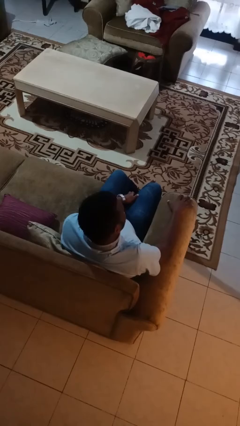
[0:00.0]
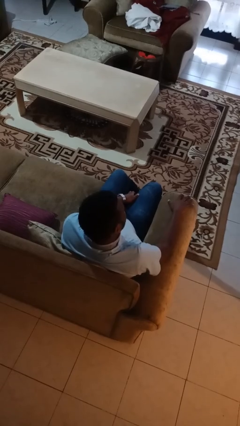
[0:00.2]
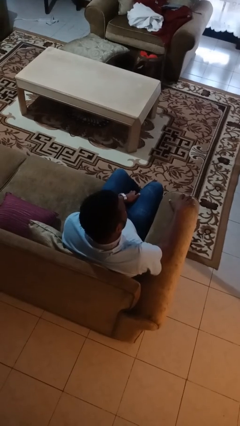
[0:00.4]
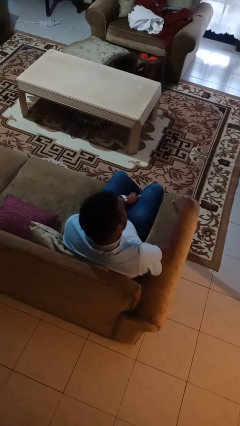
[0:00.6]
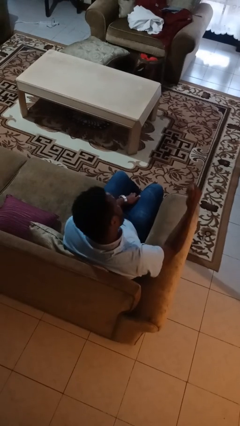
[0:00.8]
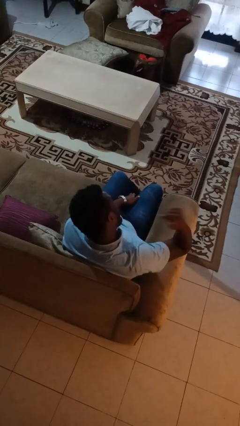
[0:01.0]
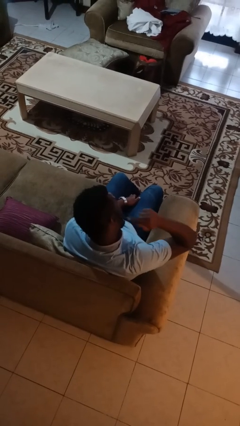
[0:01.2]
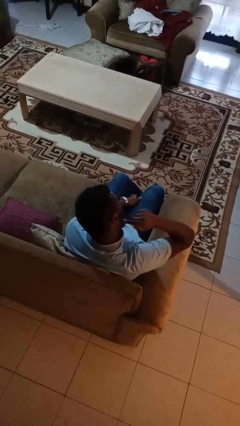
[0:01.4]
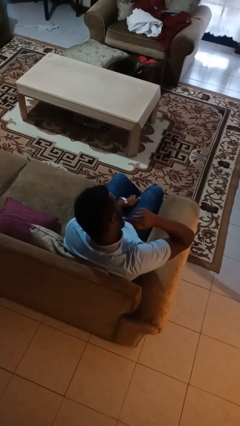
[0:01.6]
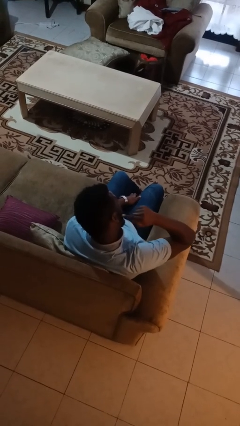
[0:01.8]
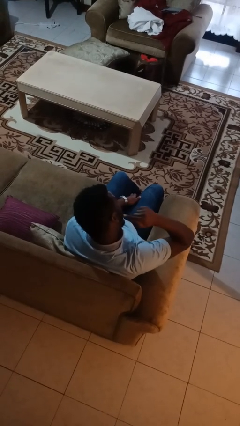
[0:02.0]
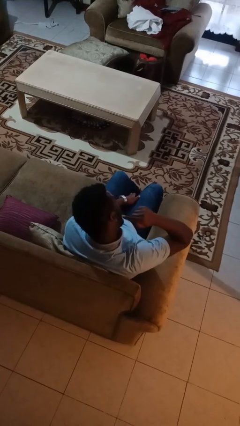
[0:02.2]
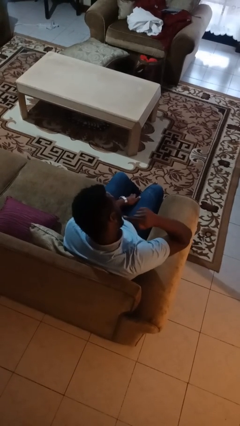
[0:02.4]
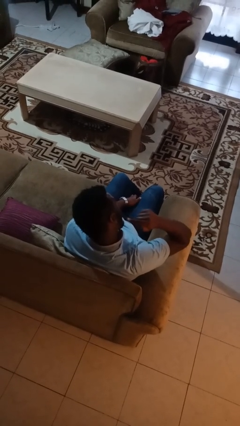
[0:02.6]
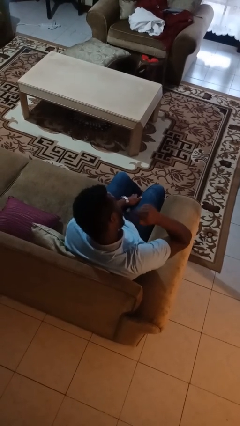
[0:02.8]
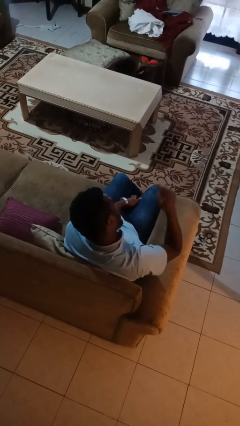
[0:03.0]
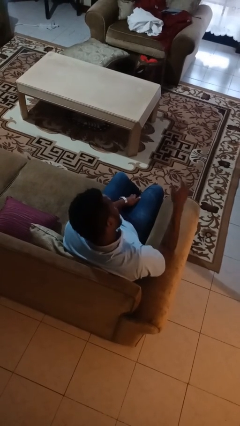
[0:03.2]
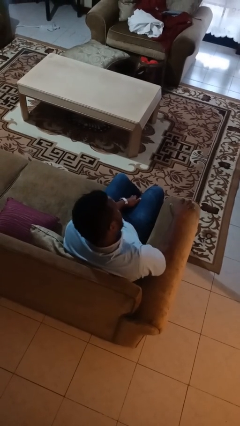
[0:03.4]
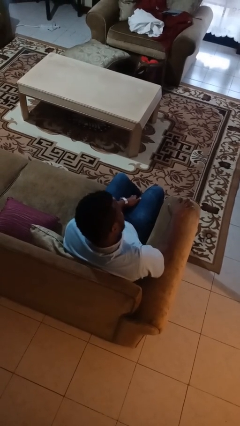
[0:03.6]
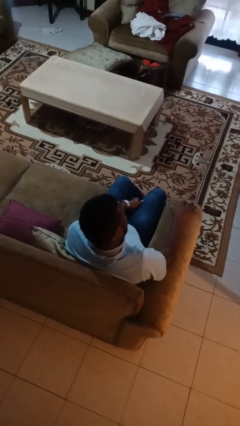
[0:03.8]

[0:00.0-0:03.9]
person gestures listen closely

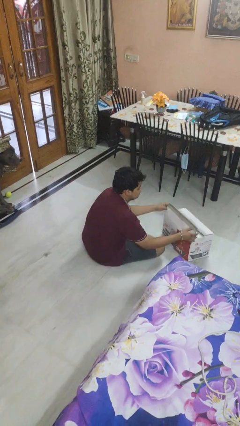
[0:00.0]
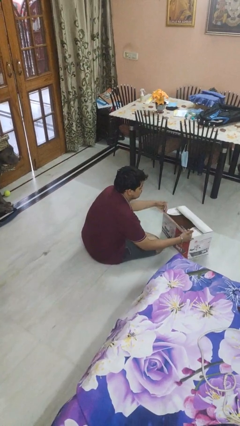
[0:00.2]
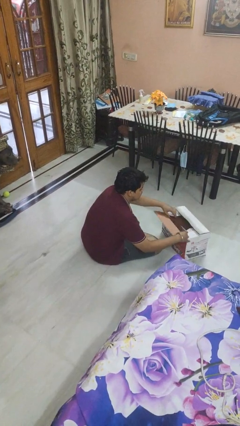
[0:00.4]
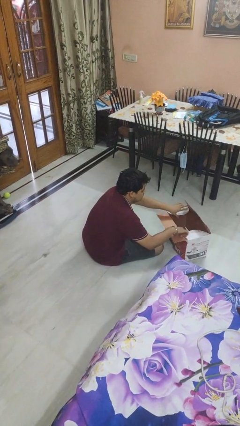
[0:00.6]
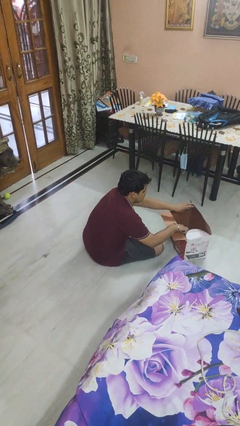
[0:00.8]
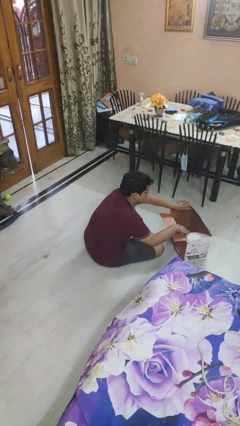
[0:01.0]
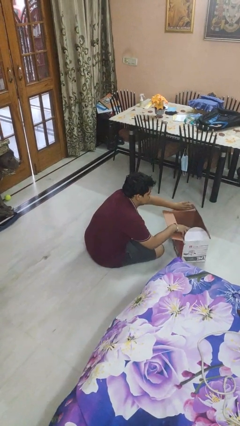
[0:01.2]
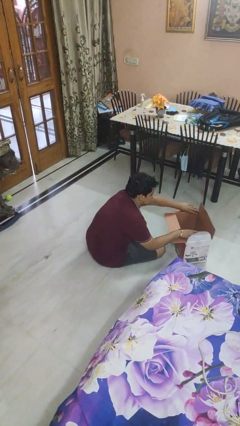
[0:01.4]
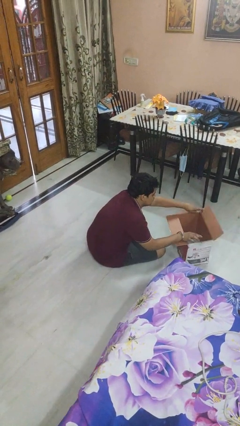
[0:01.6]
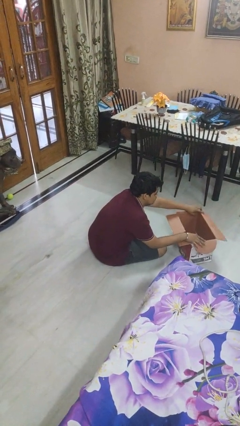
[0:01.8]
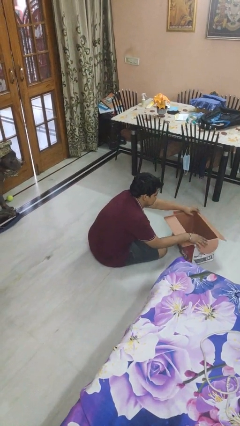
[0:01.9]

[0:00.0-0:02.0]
person opens box

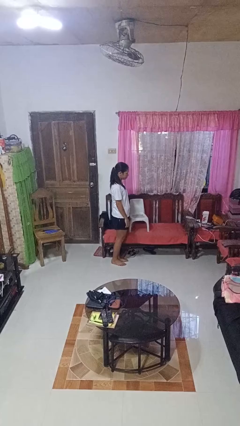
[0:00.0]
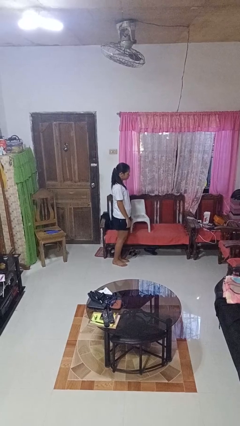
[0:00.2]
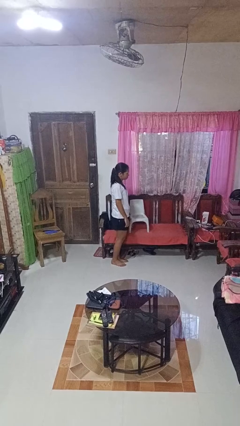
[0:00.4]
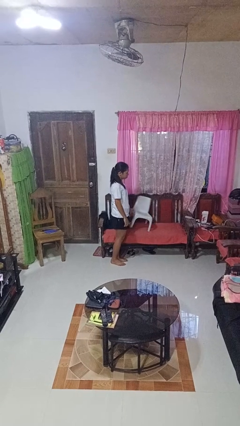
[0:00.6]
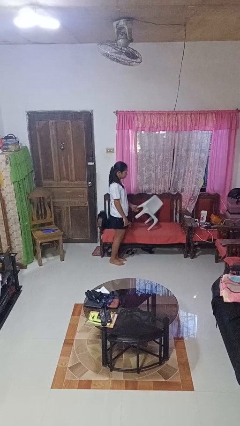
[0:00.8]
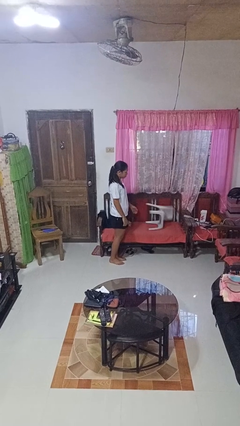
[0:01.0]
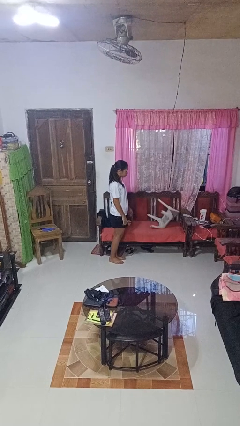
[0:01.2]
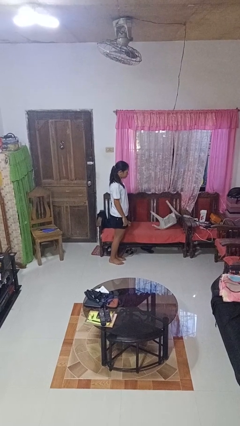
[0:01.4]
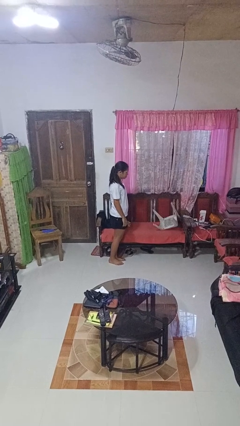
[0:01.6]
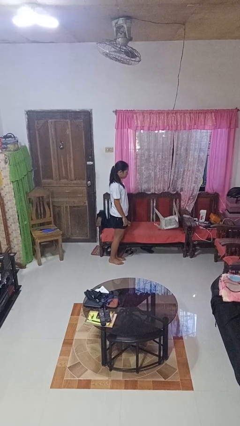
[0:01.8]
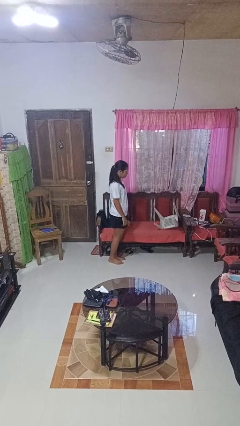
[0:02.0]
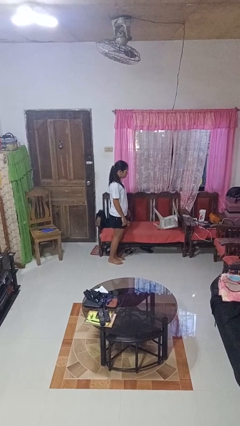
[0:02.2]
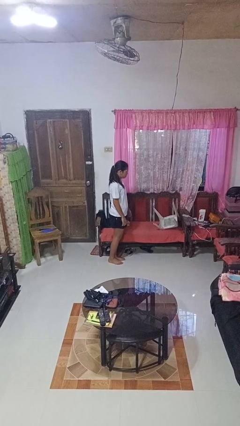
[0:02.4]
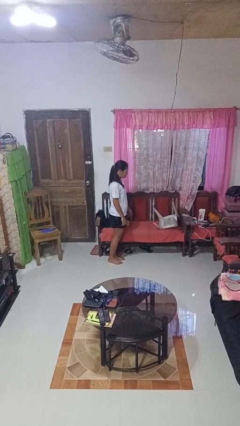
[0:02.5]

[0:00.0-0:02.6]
person knocks over furniture

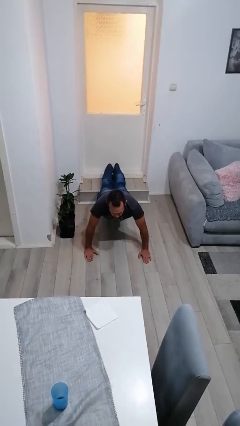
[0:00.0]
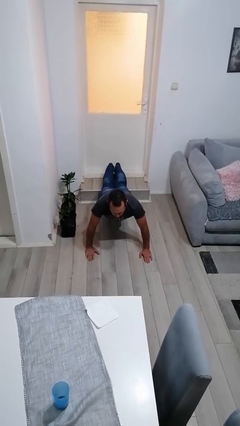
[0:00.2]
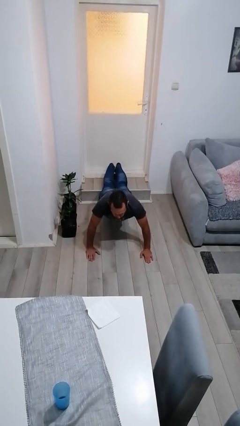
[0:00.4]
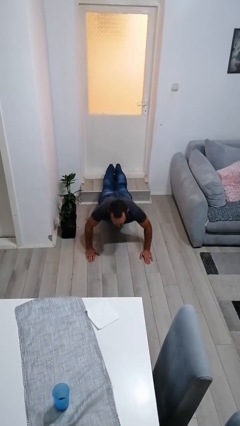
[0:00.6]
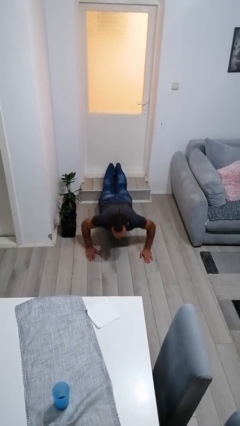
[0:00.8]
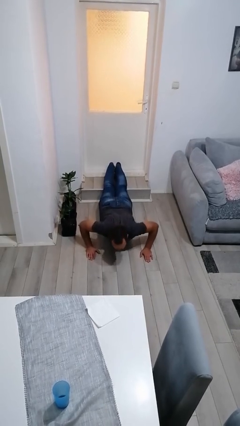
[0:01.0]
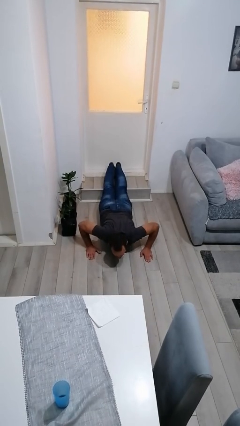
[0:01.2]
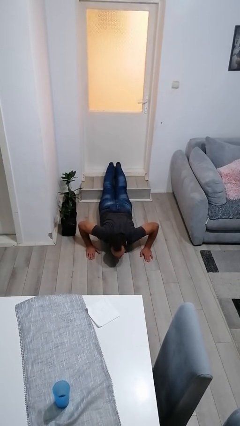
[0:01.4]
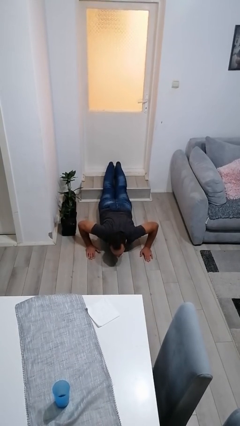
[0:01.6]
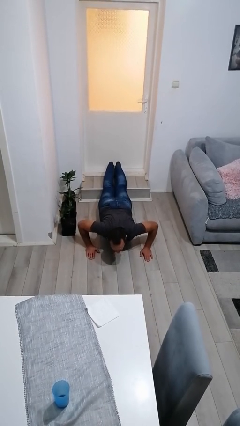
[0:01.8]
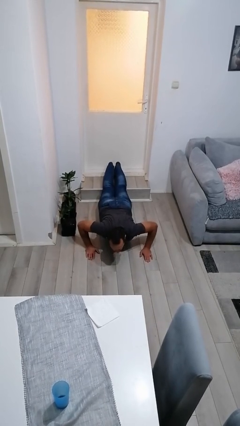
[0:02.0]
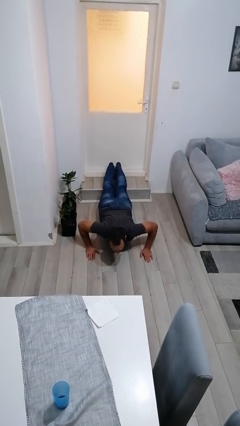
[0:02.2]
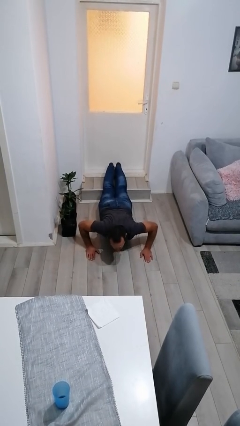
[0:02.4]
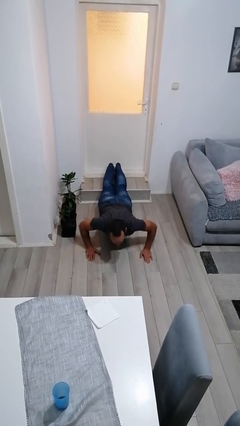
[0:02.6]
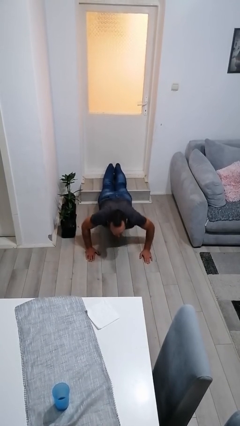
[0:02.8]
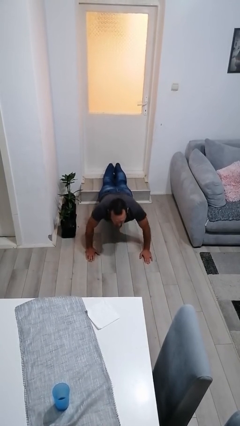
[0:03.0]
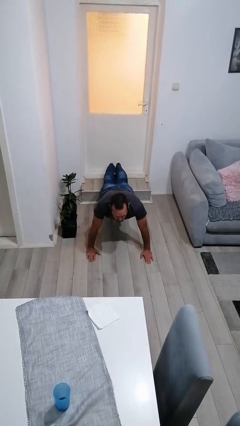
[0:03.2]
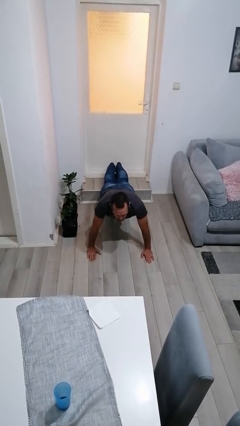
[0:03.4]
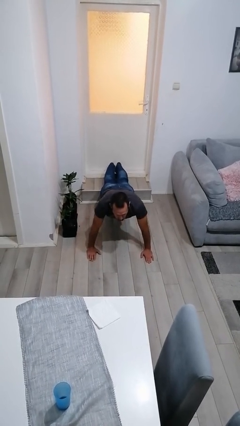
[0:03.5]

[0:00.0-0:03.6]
person exercises with pushup

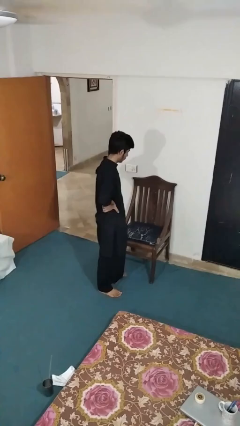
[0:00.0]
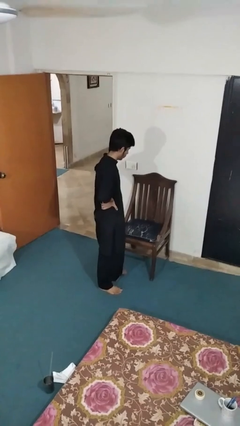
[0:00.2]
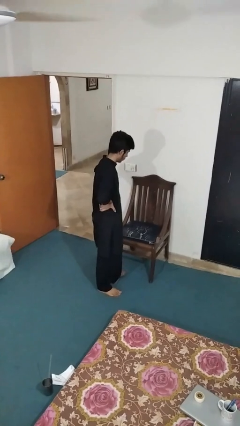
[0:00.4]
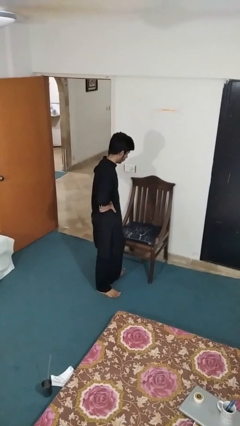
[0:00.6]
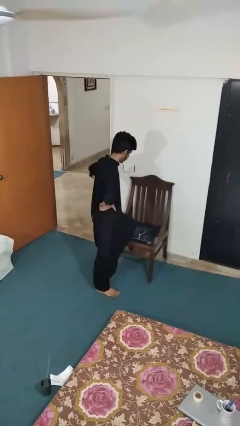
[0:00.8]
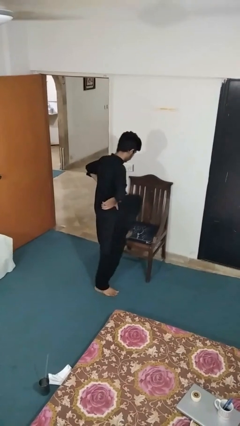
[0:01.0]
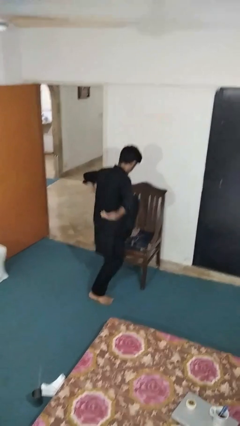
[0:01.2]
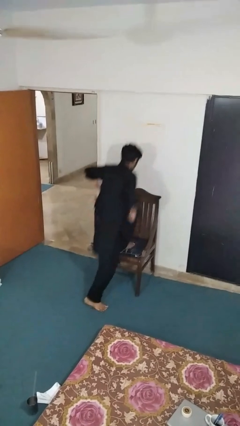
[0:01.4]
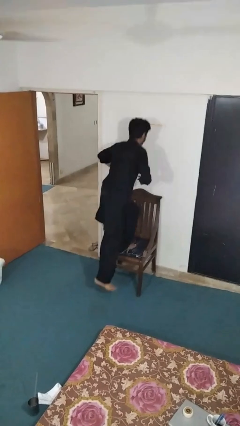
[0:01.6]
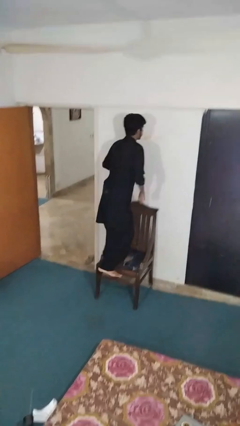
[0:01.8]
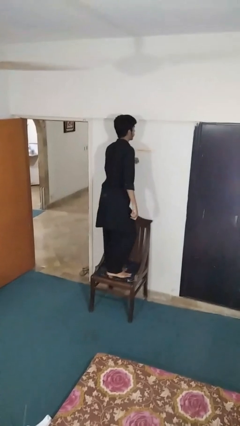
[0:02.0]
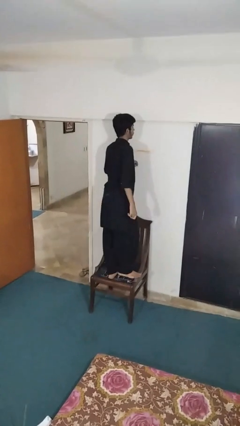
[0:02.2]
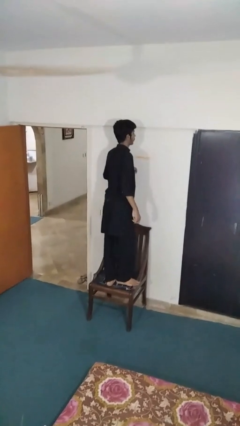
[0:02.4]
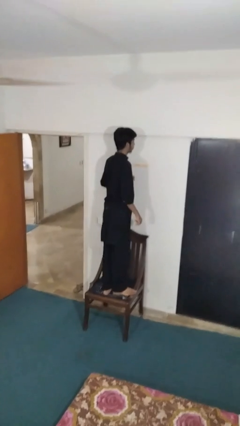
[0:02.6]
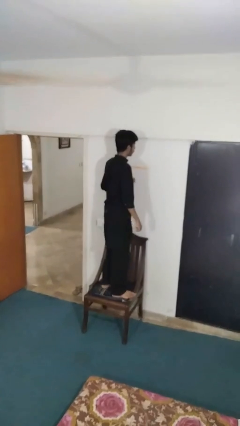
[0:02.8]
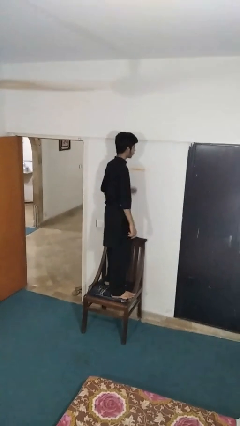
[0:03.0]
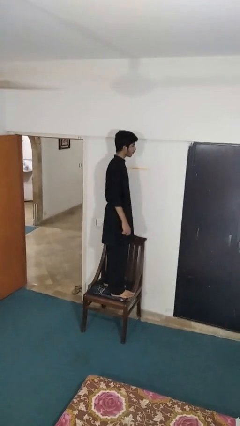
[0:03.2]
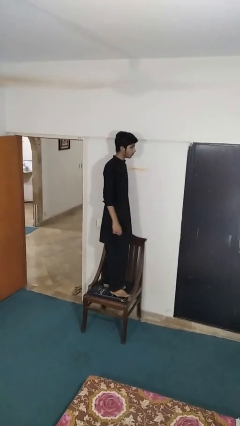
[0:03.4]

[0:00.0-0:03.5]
person climbs on chair

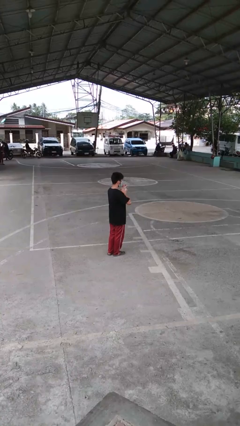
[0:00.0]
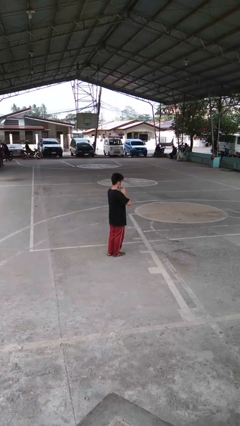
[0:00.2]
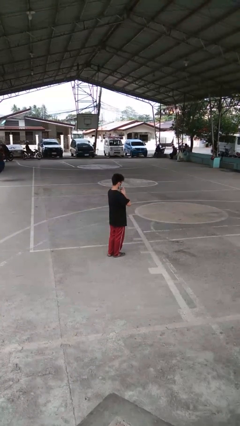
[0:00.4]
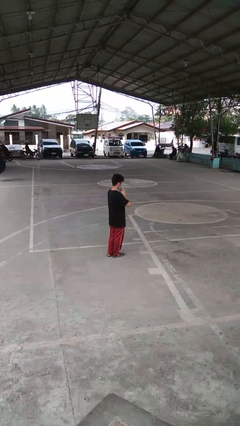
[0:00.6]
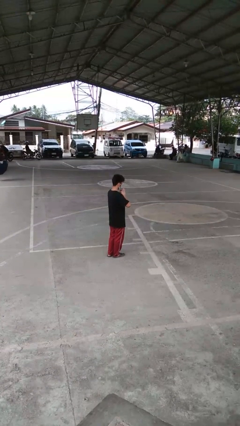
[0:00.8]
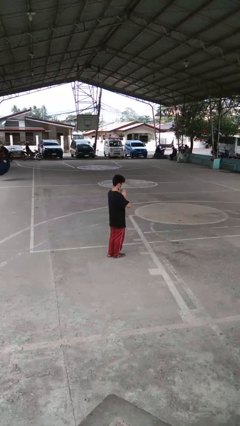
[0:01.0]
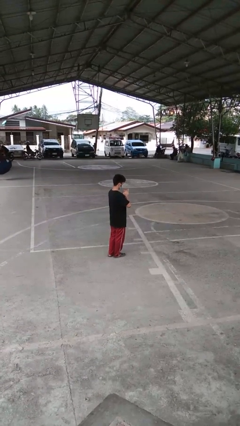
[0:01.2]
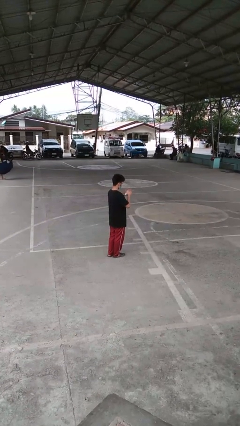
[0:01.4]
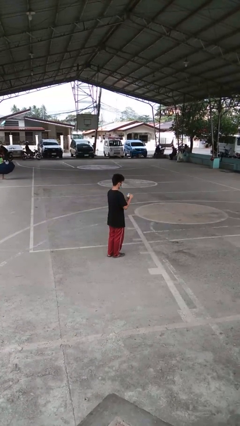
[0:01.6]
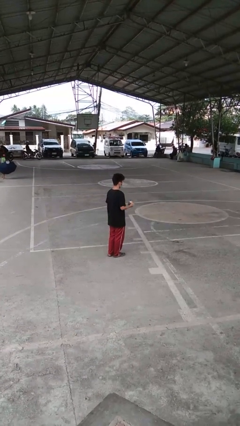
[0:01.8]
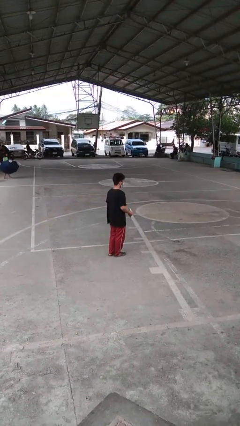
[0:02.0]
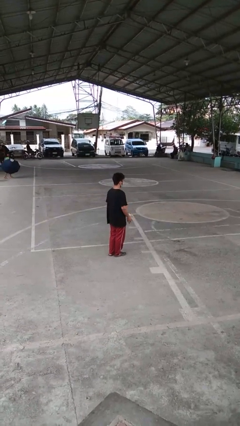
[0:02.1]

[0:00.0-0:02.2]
person squeezes object
